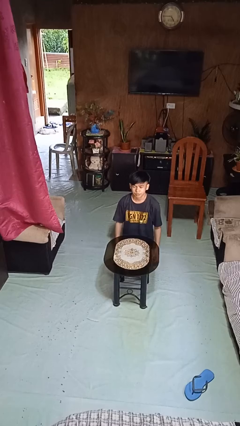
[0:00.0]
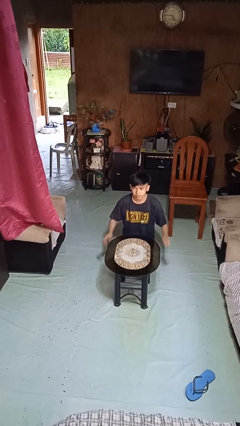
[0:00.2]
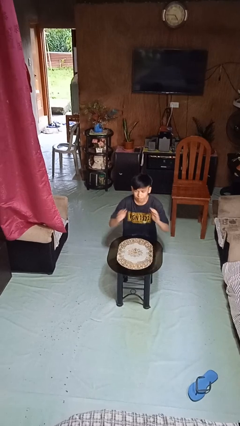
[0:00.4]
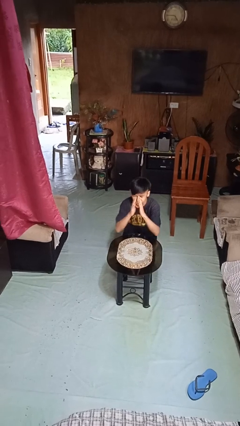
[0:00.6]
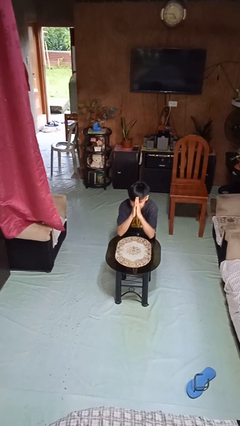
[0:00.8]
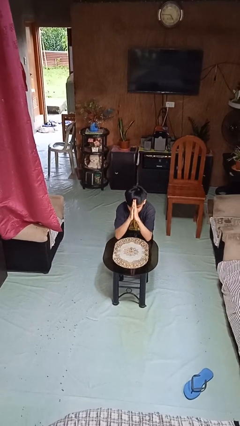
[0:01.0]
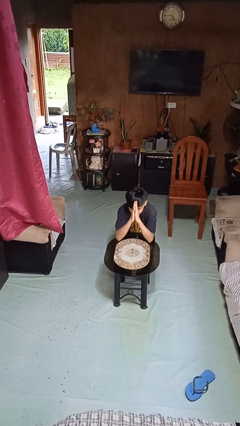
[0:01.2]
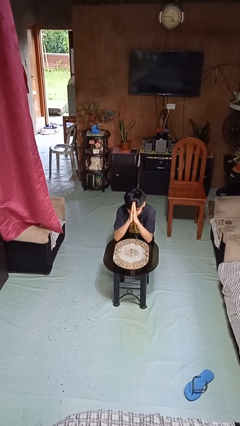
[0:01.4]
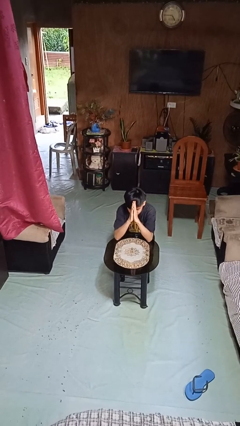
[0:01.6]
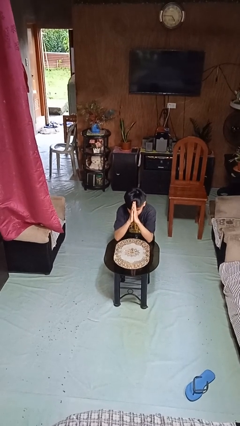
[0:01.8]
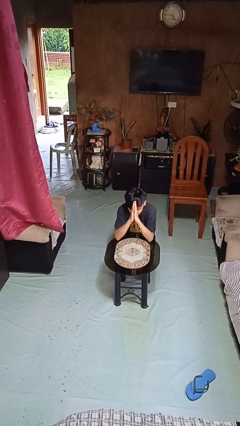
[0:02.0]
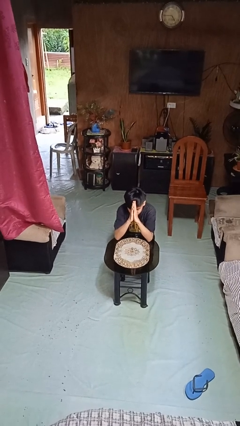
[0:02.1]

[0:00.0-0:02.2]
person prays

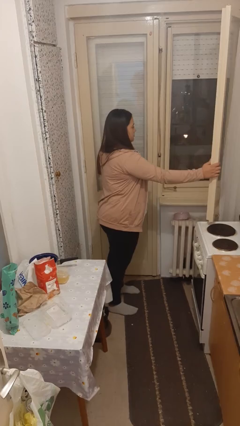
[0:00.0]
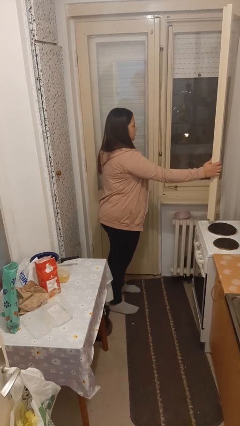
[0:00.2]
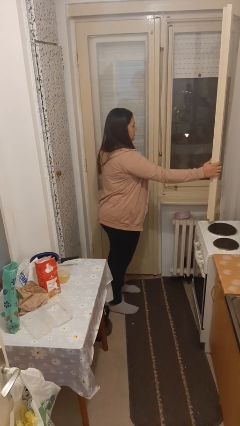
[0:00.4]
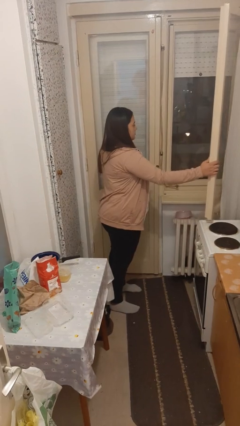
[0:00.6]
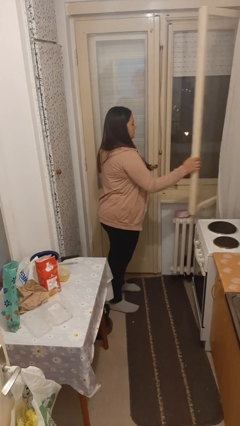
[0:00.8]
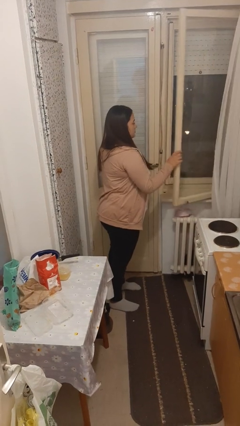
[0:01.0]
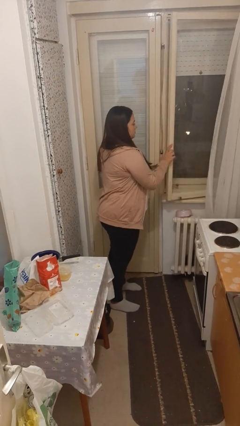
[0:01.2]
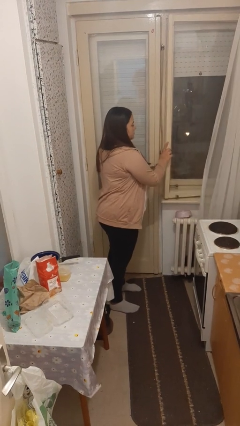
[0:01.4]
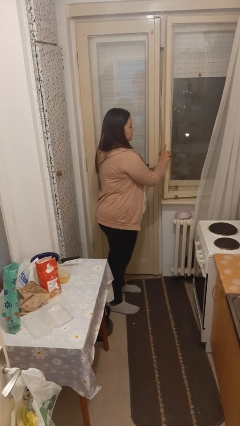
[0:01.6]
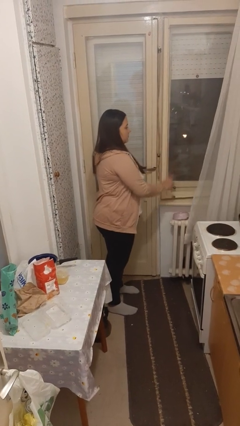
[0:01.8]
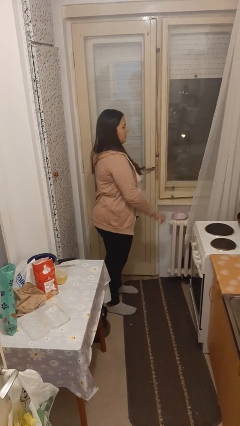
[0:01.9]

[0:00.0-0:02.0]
person closes home window

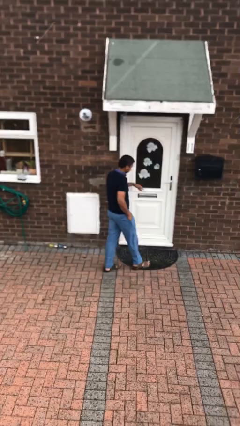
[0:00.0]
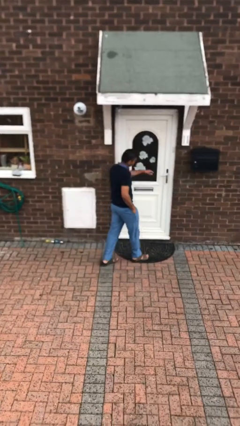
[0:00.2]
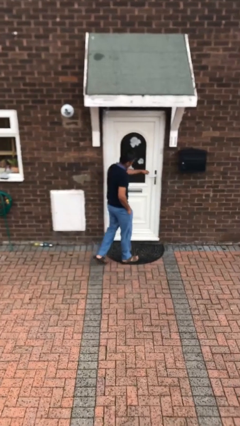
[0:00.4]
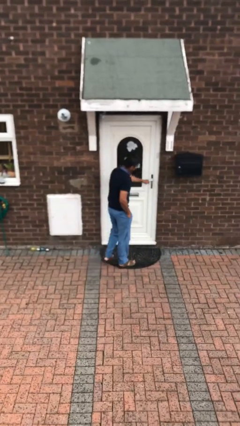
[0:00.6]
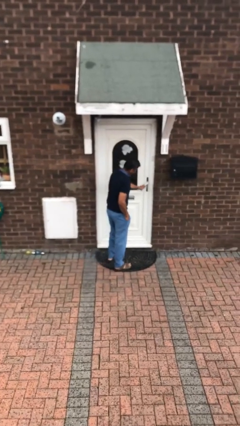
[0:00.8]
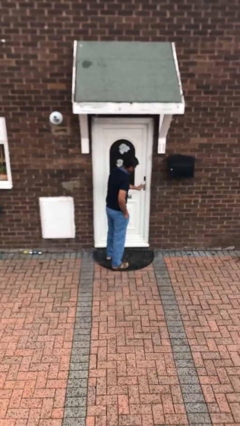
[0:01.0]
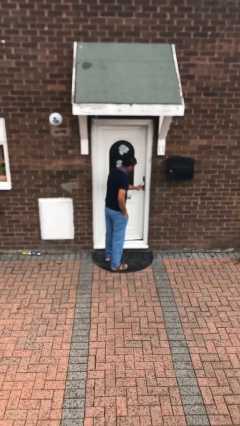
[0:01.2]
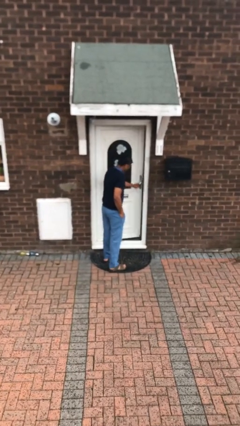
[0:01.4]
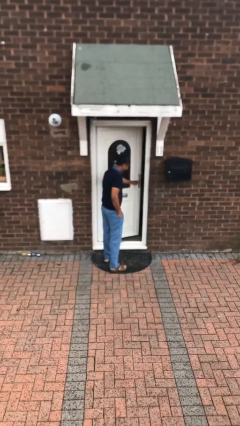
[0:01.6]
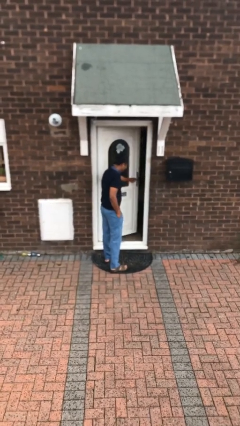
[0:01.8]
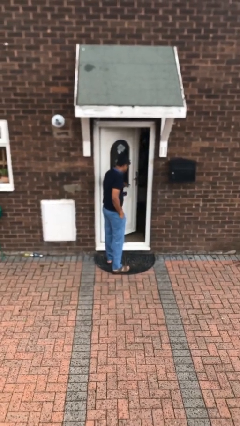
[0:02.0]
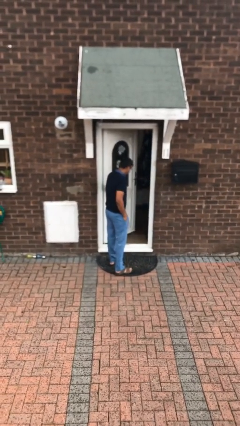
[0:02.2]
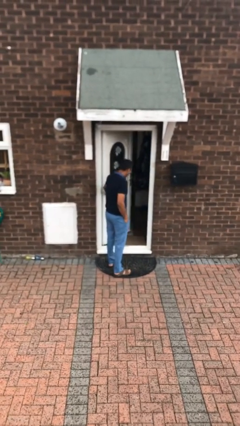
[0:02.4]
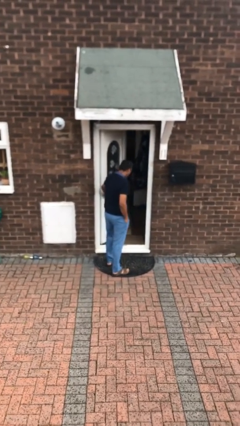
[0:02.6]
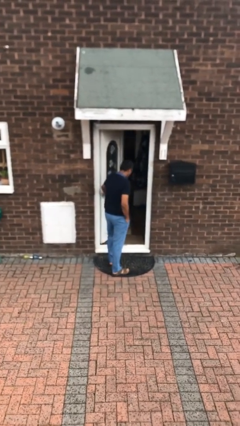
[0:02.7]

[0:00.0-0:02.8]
person opens facility door

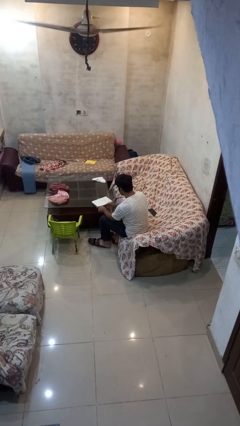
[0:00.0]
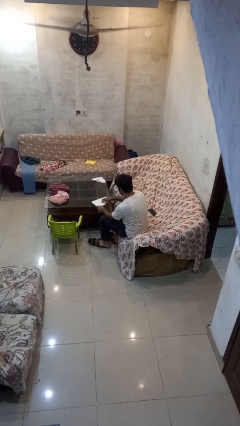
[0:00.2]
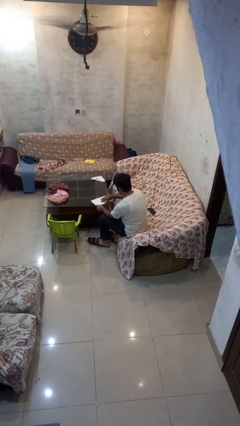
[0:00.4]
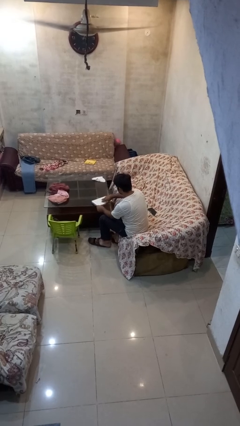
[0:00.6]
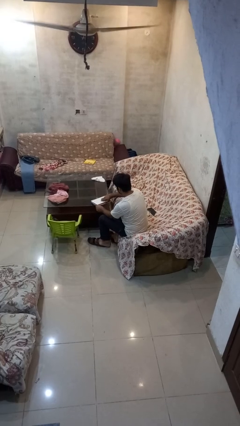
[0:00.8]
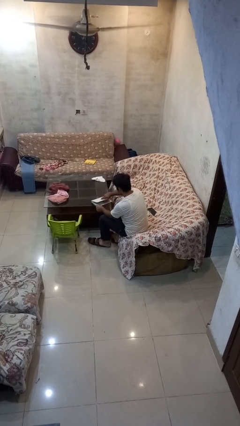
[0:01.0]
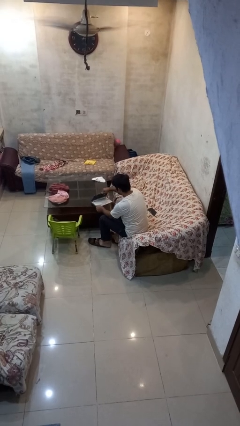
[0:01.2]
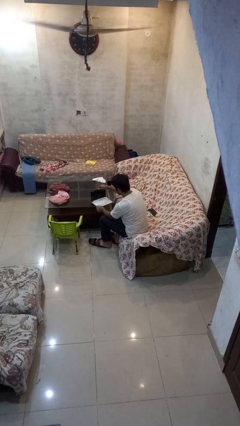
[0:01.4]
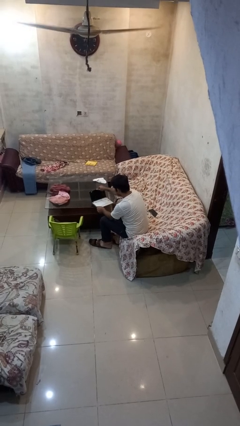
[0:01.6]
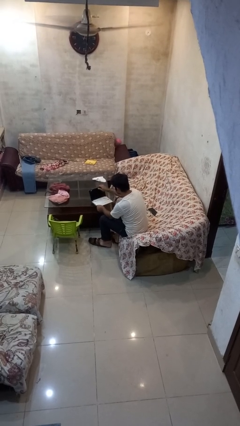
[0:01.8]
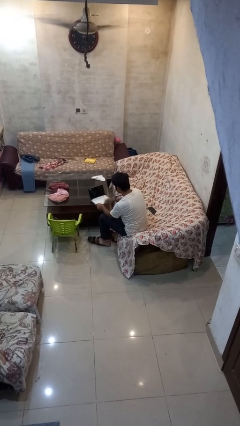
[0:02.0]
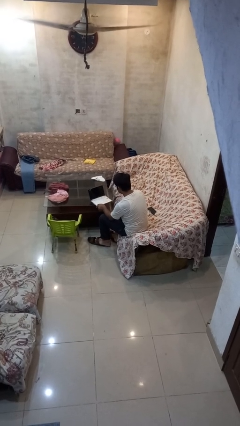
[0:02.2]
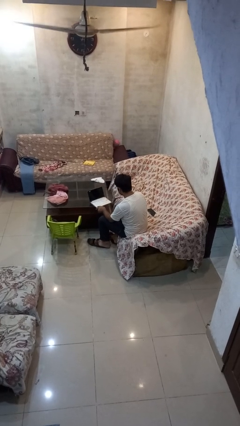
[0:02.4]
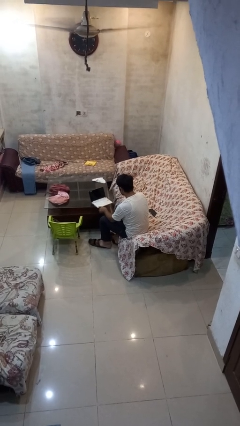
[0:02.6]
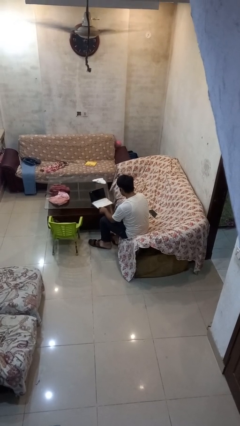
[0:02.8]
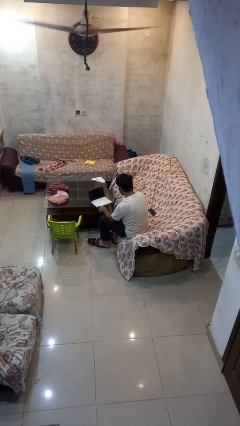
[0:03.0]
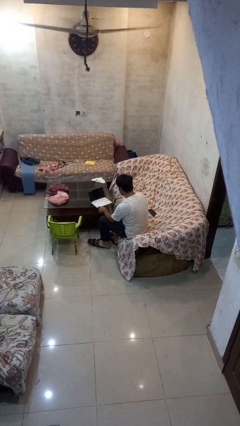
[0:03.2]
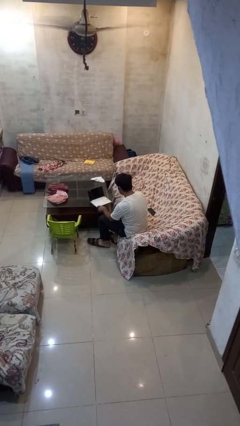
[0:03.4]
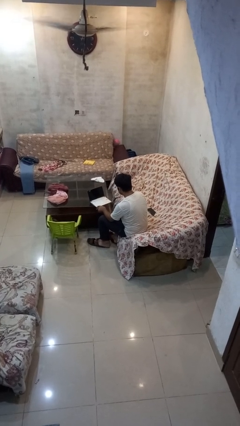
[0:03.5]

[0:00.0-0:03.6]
person opens laptop

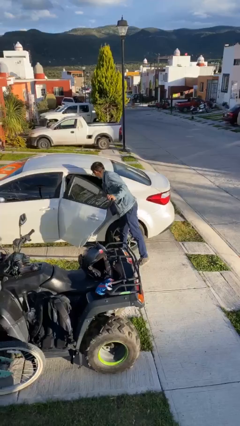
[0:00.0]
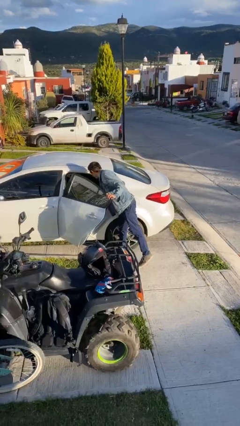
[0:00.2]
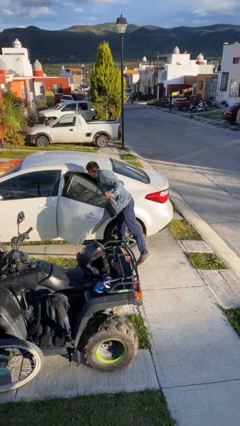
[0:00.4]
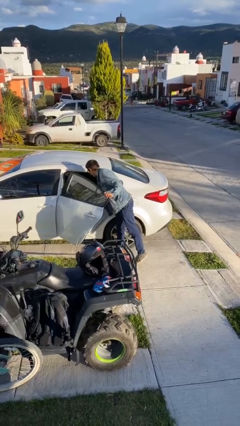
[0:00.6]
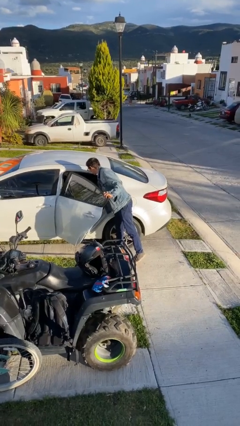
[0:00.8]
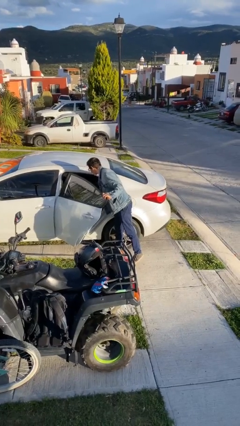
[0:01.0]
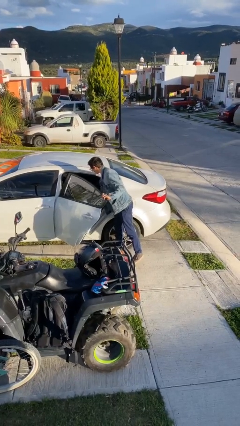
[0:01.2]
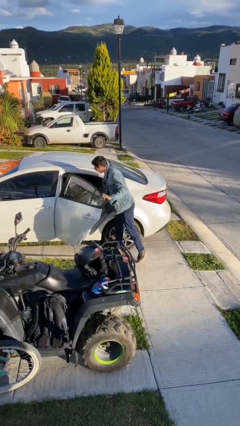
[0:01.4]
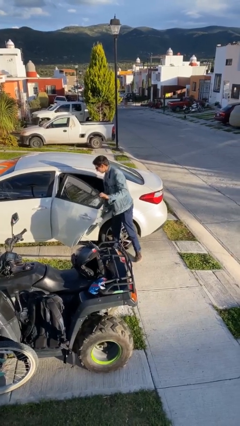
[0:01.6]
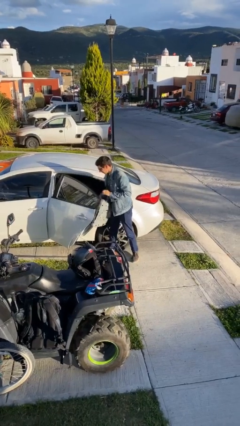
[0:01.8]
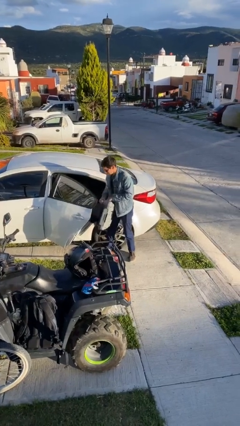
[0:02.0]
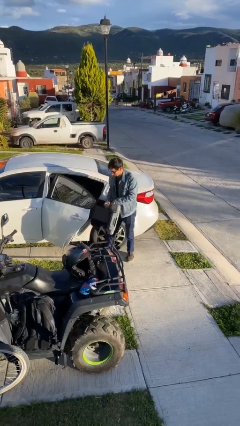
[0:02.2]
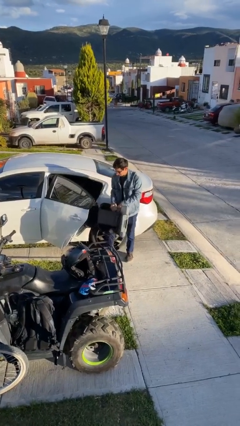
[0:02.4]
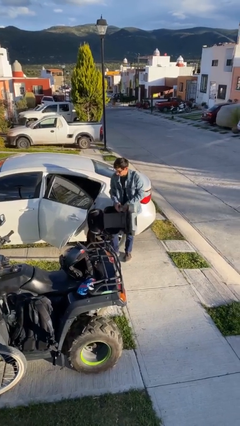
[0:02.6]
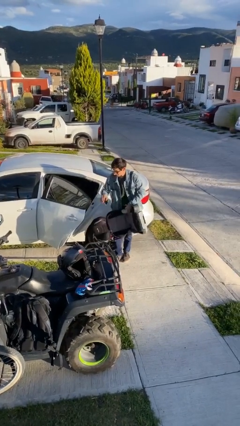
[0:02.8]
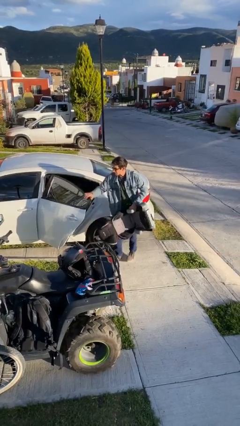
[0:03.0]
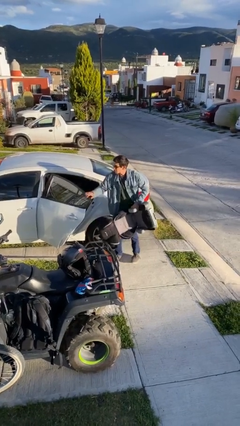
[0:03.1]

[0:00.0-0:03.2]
person unloads car

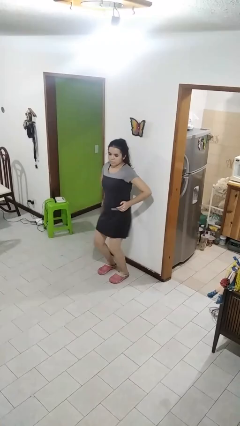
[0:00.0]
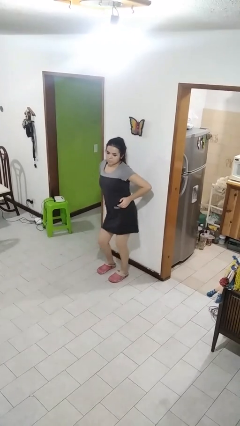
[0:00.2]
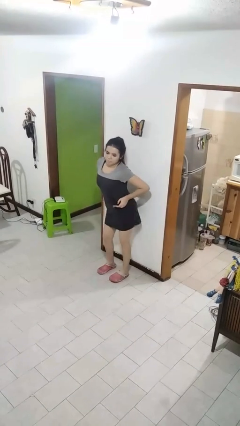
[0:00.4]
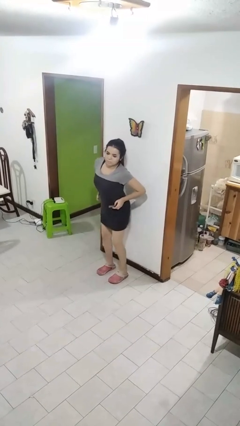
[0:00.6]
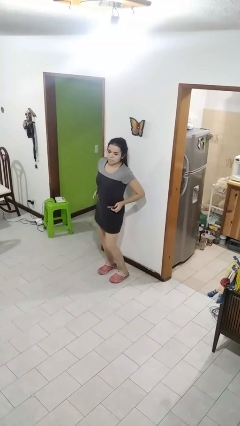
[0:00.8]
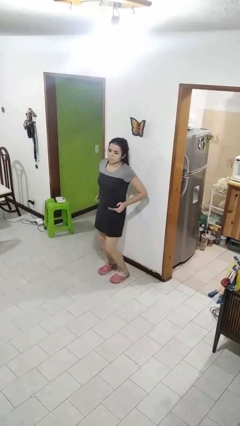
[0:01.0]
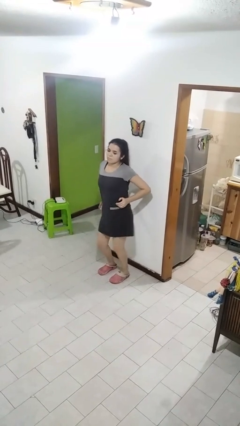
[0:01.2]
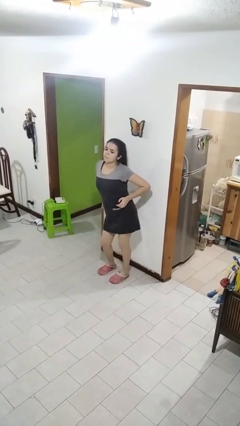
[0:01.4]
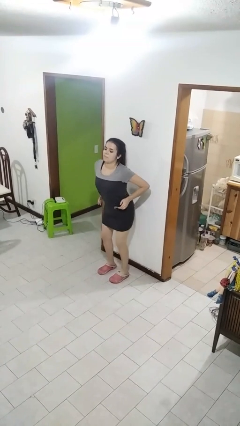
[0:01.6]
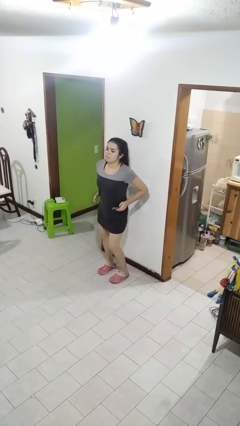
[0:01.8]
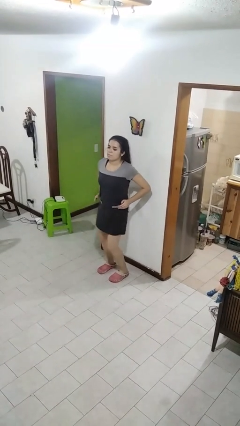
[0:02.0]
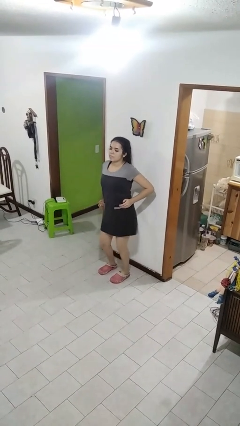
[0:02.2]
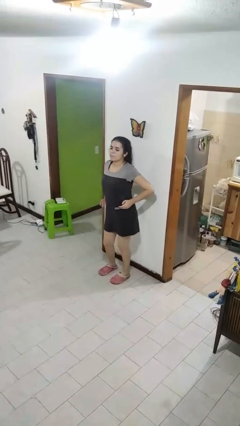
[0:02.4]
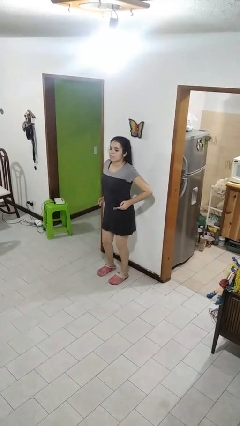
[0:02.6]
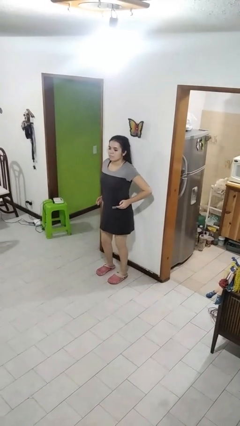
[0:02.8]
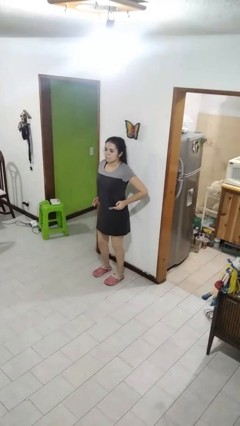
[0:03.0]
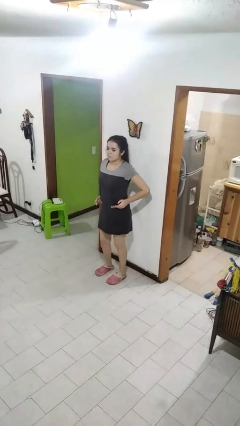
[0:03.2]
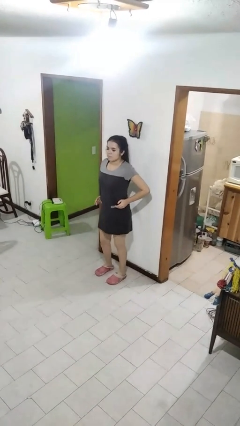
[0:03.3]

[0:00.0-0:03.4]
person wiggles hips

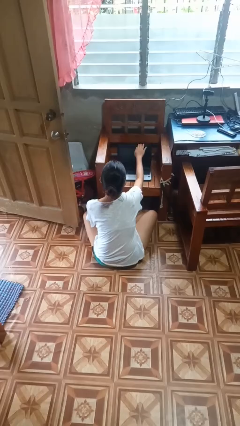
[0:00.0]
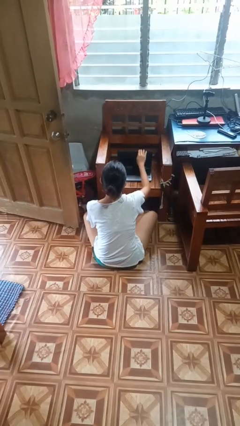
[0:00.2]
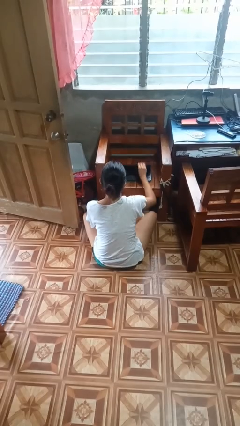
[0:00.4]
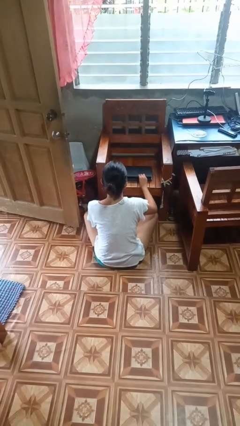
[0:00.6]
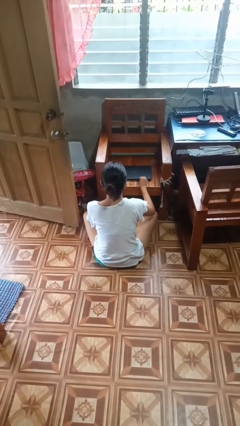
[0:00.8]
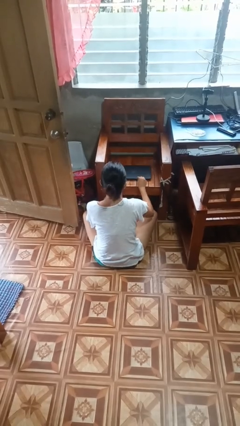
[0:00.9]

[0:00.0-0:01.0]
person closes laptop
